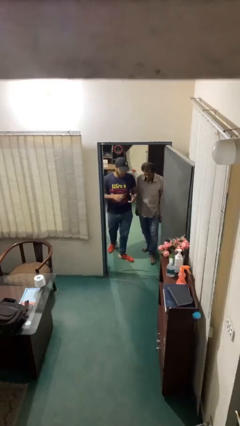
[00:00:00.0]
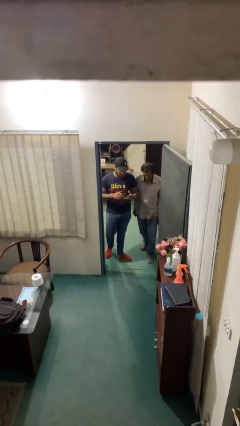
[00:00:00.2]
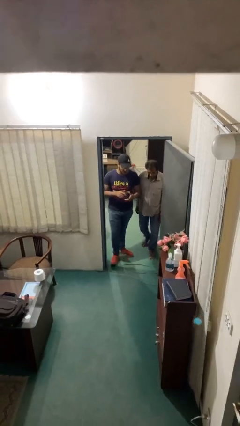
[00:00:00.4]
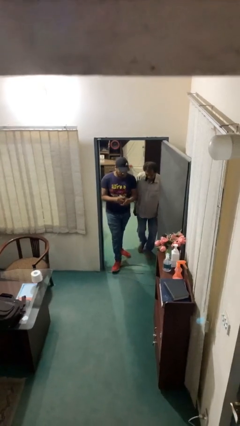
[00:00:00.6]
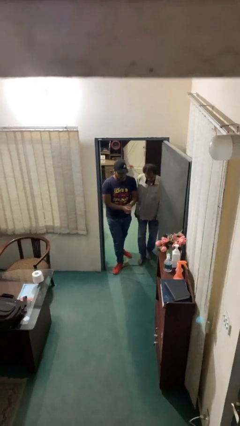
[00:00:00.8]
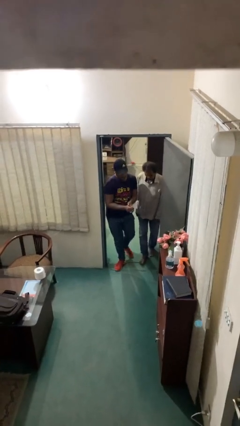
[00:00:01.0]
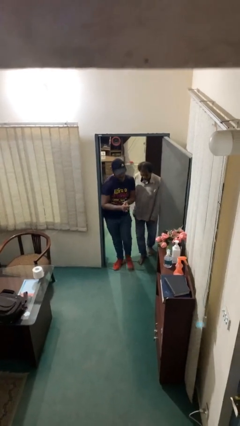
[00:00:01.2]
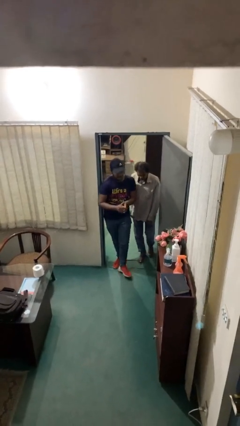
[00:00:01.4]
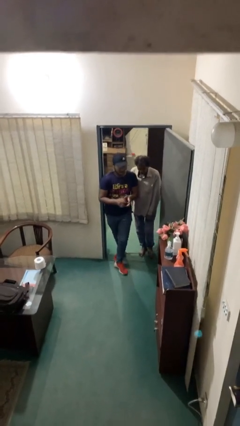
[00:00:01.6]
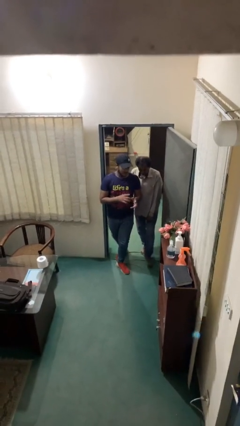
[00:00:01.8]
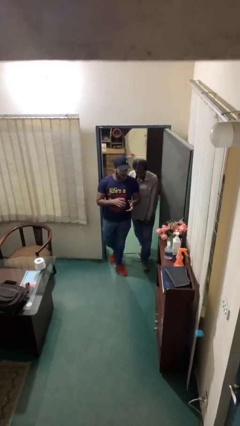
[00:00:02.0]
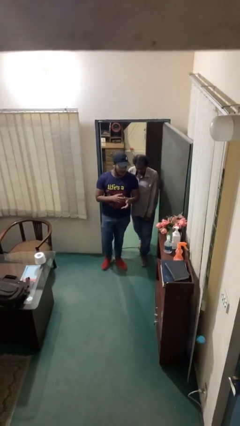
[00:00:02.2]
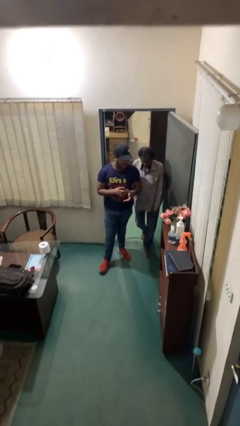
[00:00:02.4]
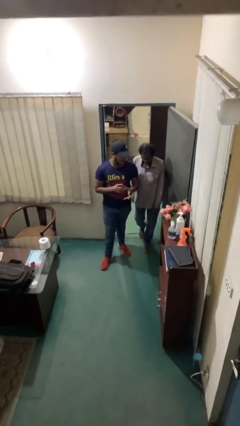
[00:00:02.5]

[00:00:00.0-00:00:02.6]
person talks to person

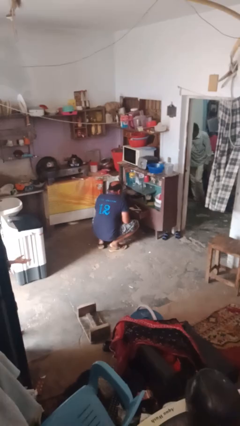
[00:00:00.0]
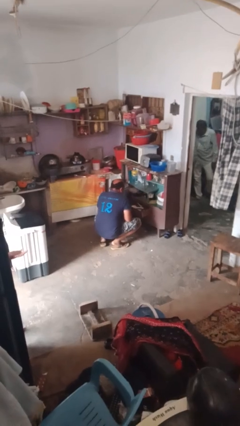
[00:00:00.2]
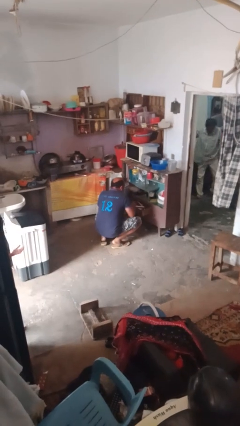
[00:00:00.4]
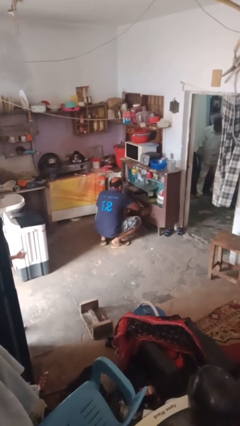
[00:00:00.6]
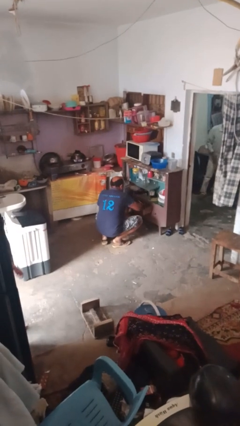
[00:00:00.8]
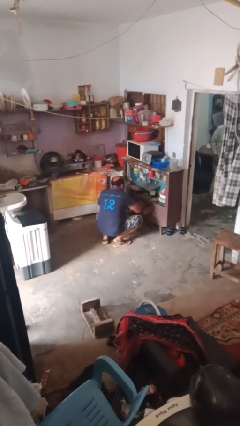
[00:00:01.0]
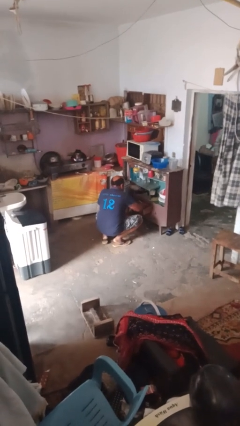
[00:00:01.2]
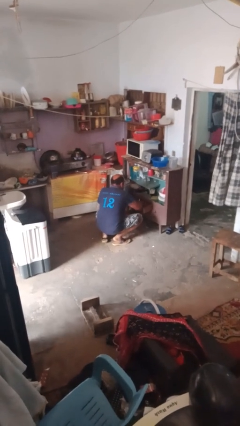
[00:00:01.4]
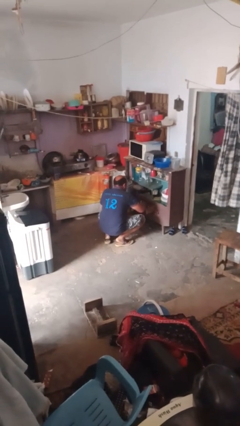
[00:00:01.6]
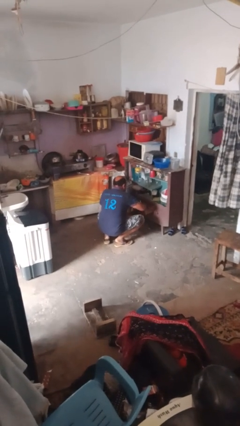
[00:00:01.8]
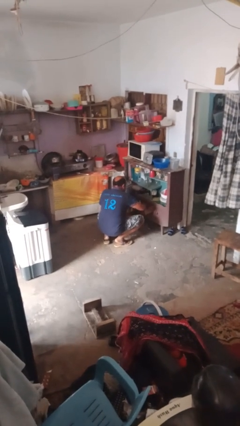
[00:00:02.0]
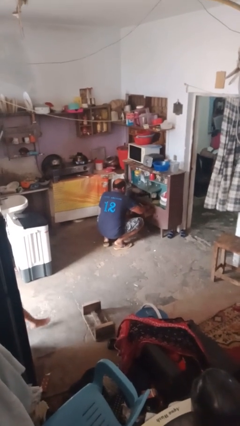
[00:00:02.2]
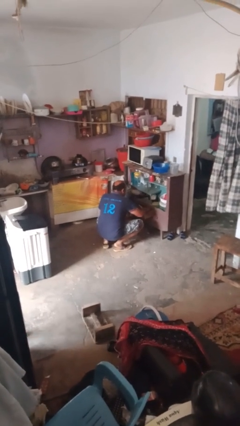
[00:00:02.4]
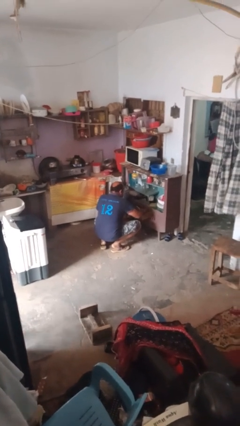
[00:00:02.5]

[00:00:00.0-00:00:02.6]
person searches in kitchen drawer

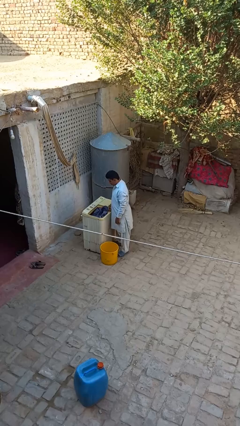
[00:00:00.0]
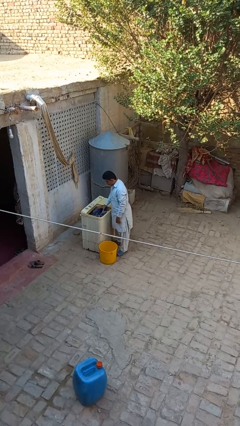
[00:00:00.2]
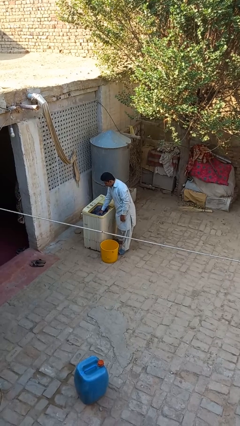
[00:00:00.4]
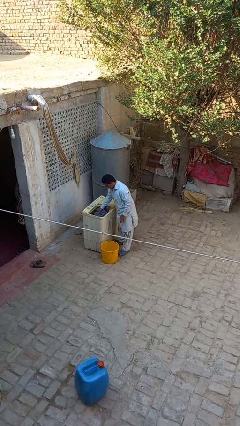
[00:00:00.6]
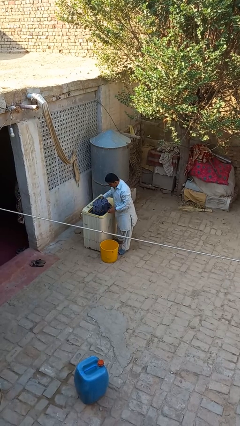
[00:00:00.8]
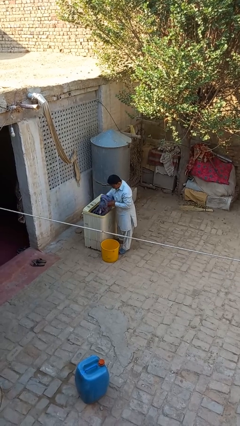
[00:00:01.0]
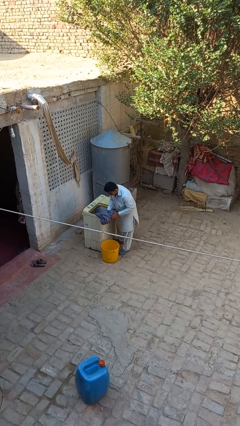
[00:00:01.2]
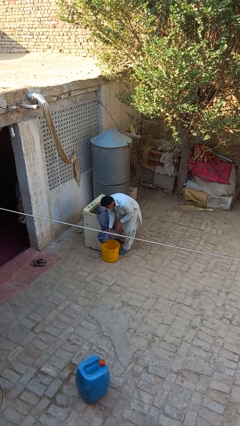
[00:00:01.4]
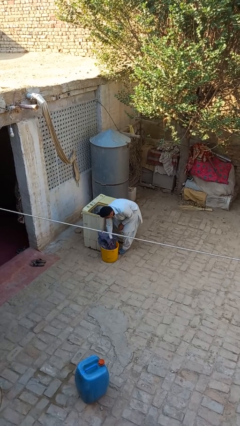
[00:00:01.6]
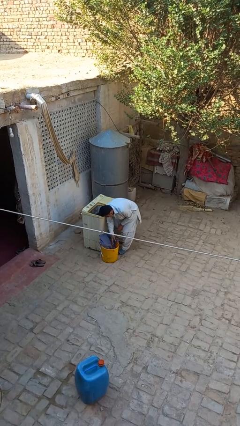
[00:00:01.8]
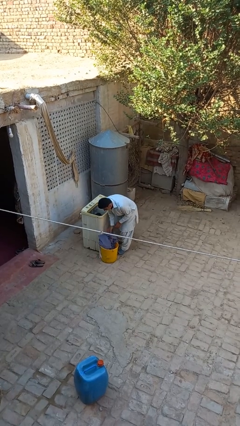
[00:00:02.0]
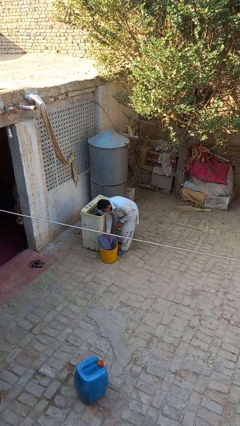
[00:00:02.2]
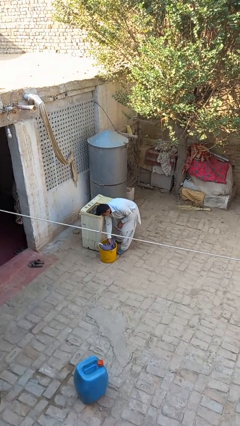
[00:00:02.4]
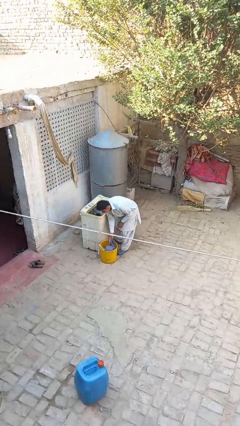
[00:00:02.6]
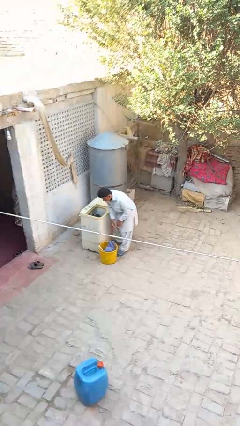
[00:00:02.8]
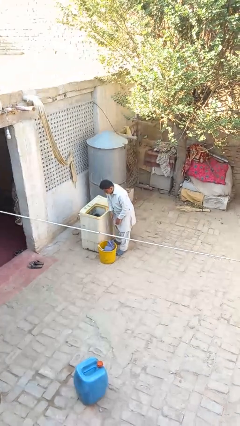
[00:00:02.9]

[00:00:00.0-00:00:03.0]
person unloads clotheswasher

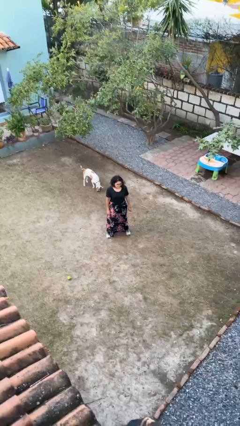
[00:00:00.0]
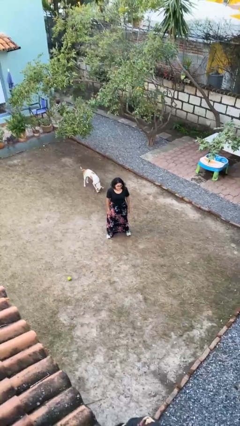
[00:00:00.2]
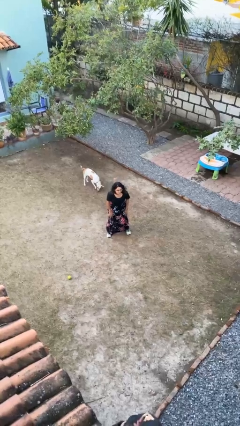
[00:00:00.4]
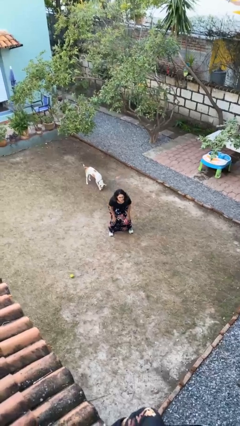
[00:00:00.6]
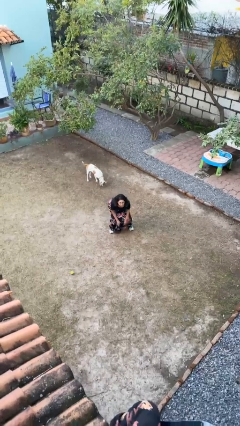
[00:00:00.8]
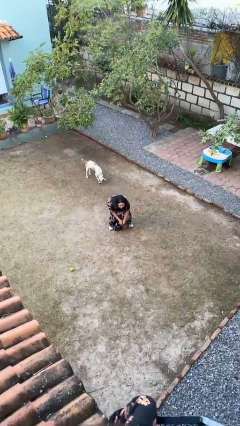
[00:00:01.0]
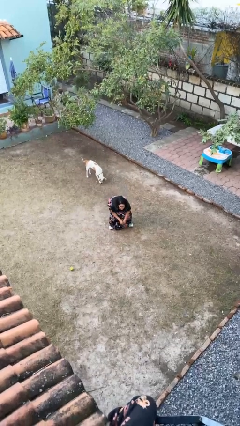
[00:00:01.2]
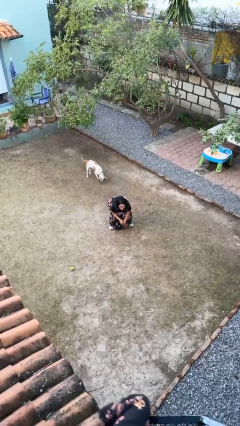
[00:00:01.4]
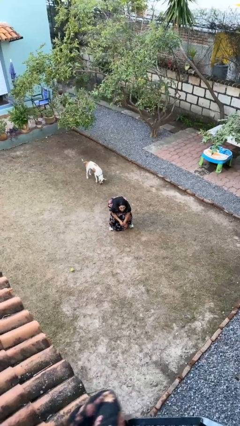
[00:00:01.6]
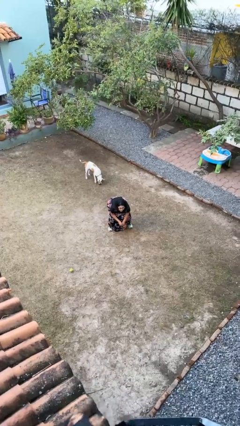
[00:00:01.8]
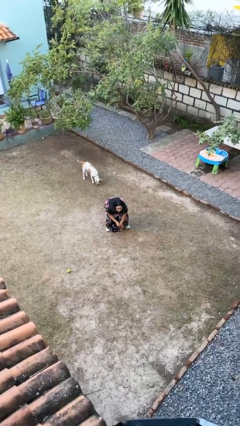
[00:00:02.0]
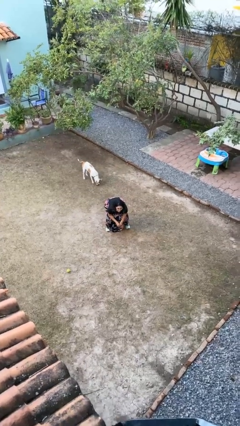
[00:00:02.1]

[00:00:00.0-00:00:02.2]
person squats

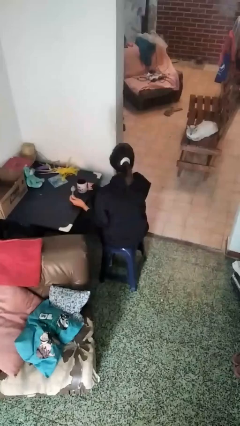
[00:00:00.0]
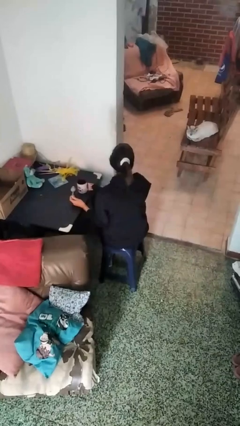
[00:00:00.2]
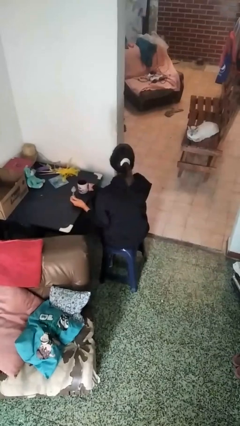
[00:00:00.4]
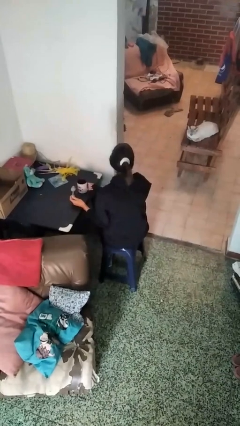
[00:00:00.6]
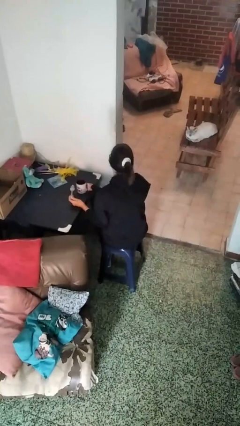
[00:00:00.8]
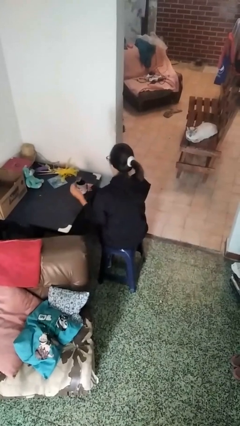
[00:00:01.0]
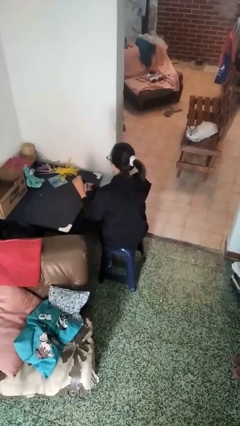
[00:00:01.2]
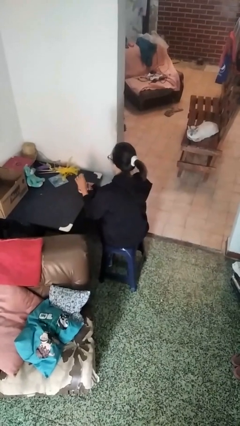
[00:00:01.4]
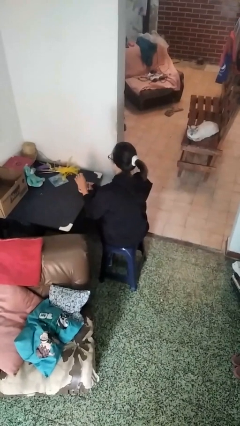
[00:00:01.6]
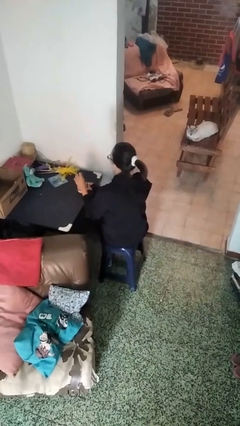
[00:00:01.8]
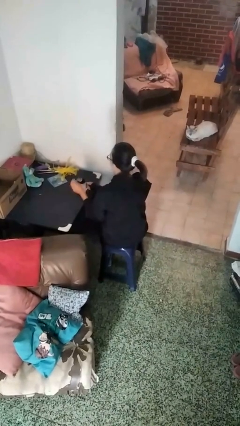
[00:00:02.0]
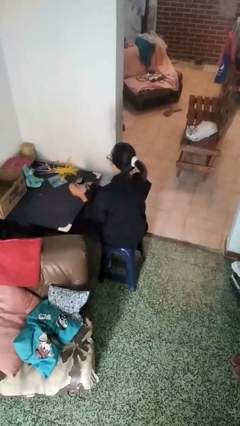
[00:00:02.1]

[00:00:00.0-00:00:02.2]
person stirs mug

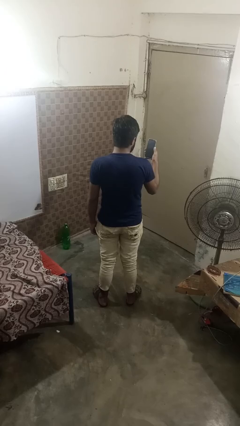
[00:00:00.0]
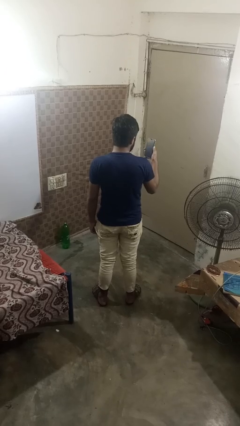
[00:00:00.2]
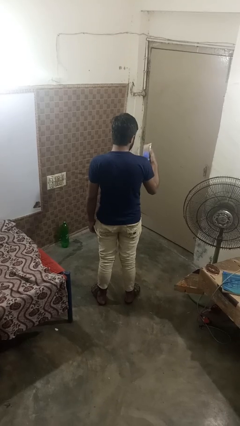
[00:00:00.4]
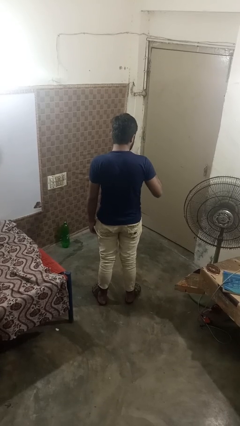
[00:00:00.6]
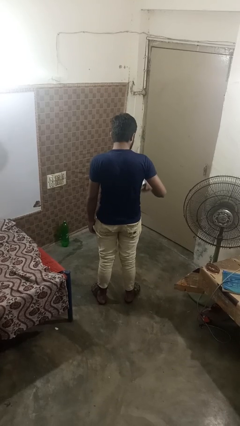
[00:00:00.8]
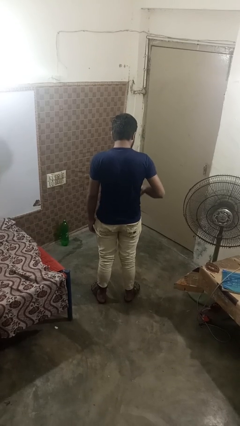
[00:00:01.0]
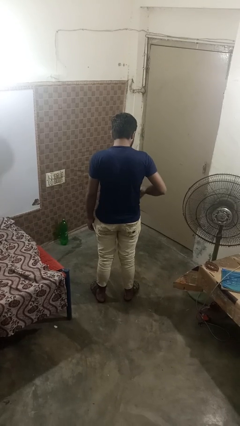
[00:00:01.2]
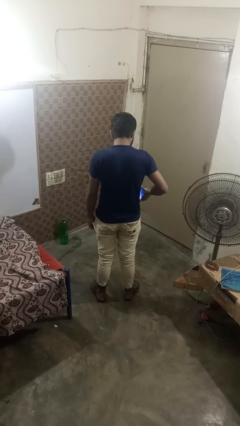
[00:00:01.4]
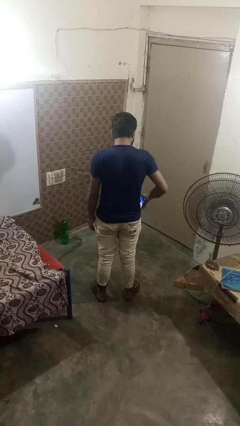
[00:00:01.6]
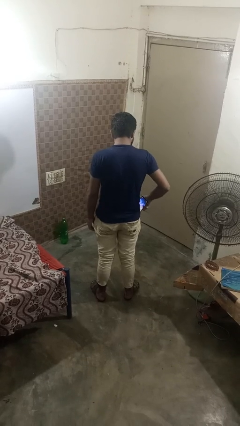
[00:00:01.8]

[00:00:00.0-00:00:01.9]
person puts phone into pocket

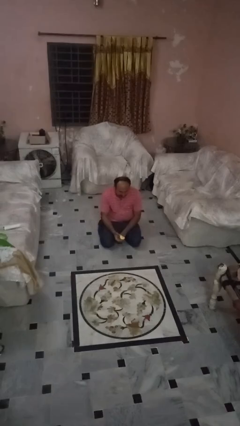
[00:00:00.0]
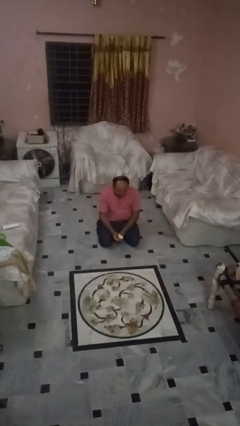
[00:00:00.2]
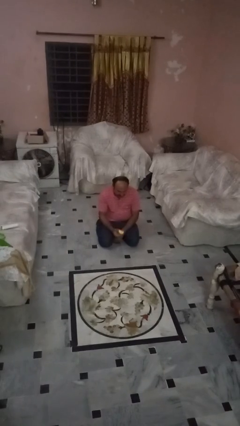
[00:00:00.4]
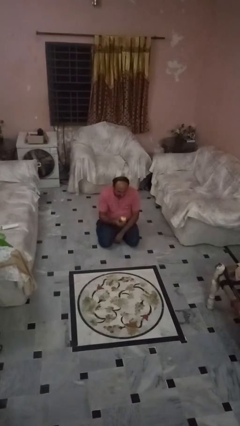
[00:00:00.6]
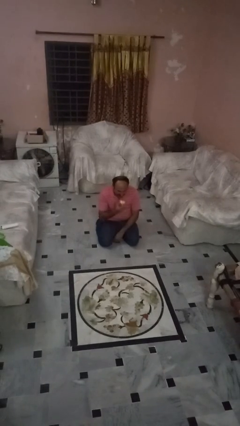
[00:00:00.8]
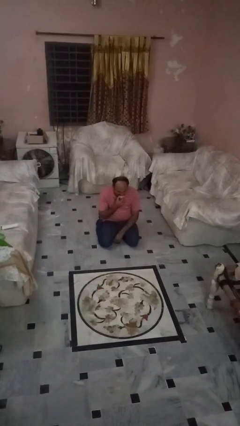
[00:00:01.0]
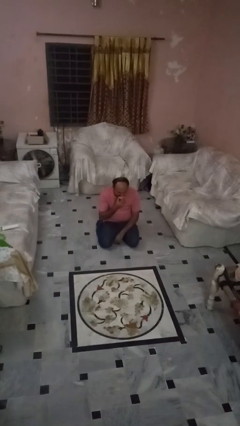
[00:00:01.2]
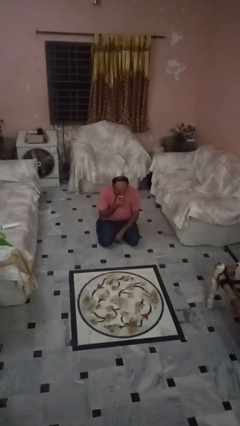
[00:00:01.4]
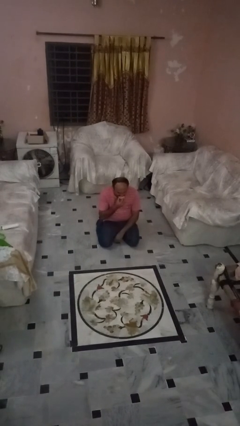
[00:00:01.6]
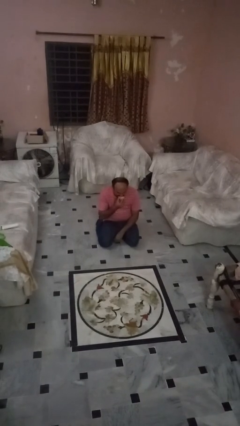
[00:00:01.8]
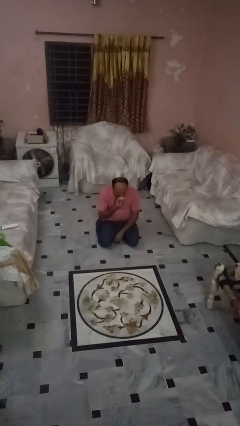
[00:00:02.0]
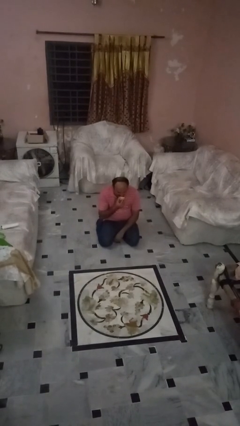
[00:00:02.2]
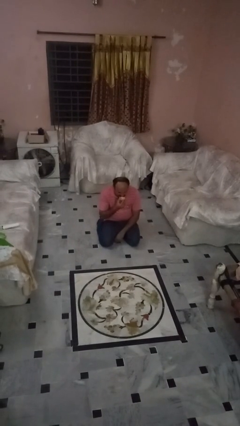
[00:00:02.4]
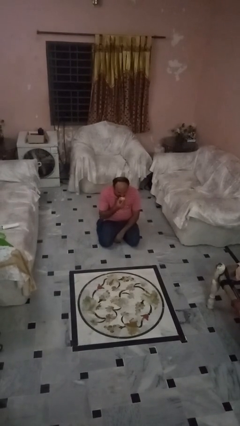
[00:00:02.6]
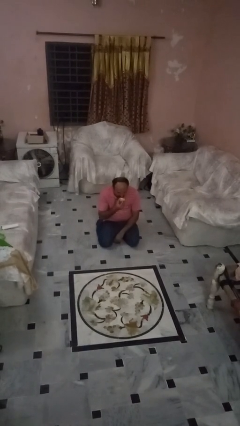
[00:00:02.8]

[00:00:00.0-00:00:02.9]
person eats apple

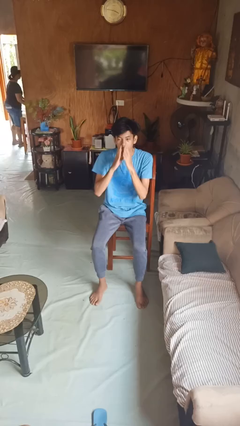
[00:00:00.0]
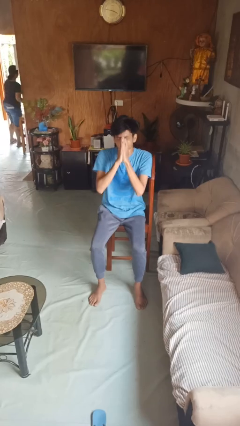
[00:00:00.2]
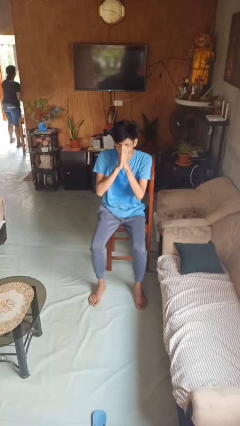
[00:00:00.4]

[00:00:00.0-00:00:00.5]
person sneezes into hand
